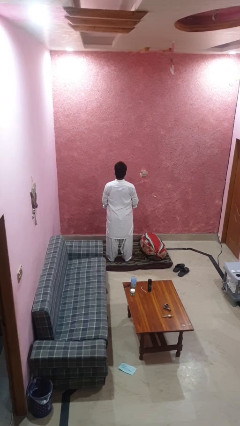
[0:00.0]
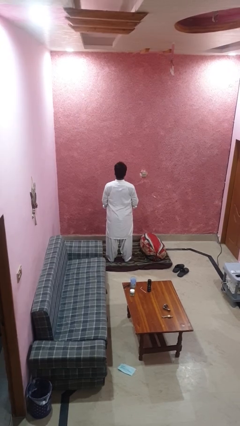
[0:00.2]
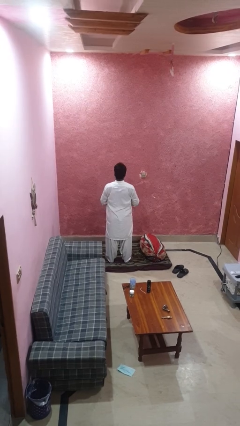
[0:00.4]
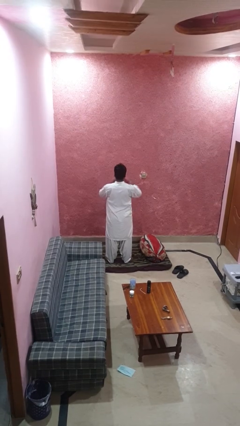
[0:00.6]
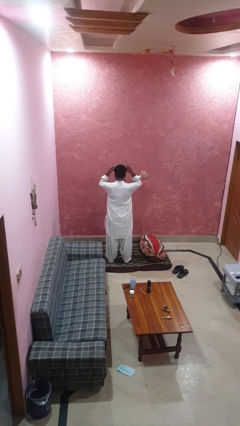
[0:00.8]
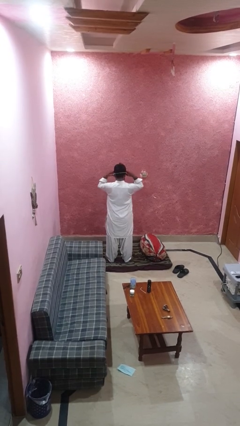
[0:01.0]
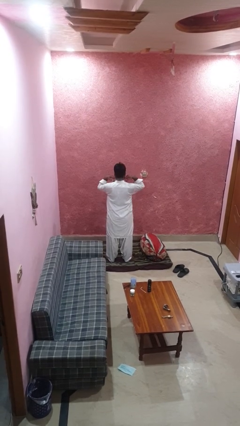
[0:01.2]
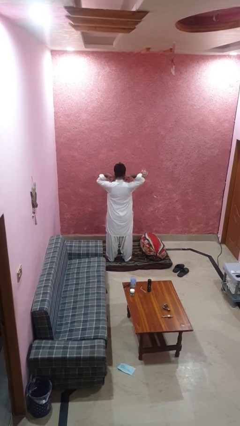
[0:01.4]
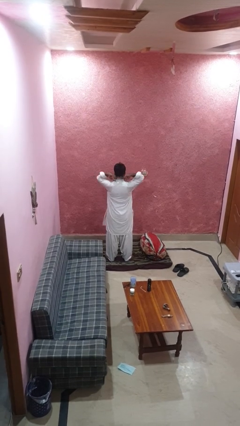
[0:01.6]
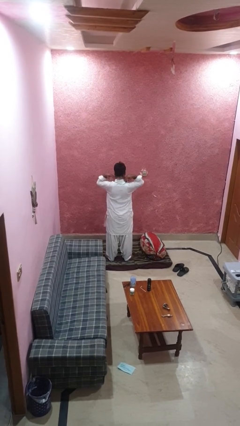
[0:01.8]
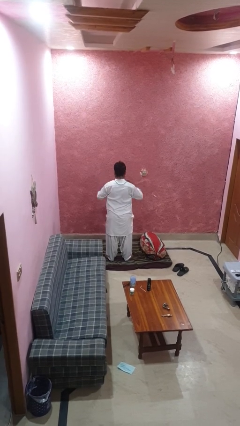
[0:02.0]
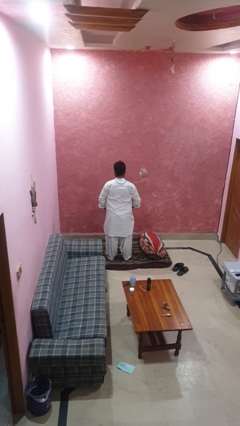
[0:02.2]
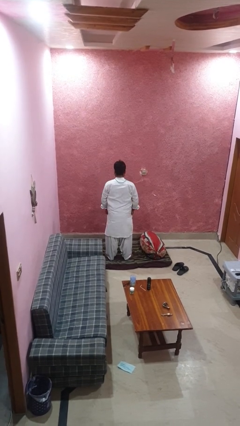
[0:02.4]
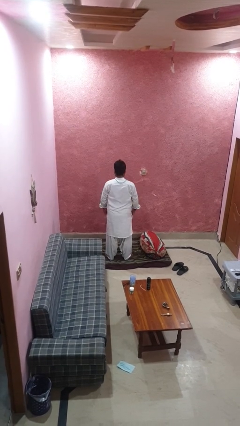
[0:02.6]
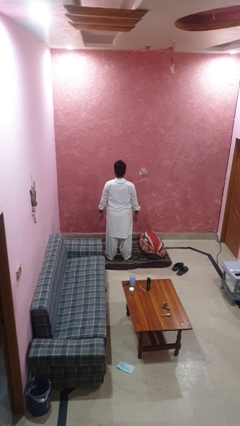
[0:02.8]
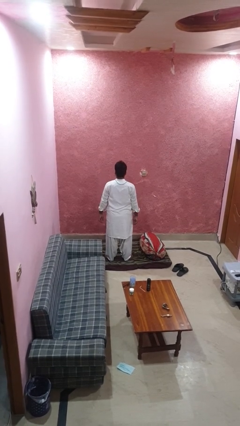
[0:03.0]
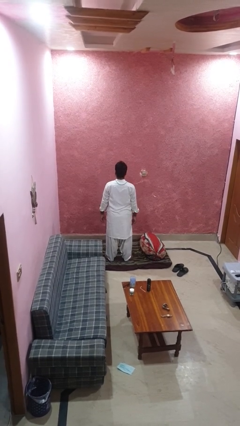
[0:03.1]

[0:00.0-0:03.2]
person puts on necklace

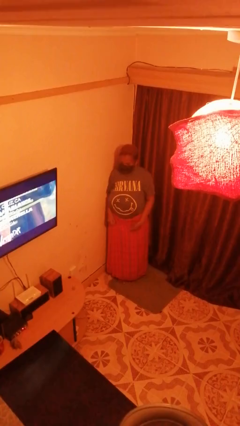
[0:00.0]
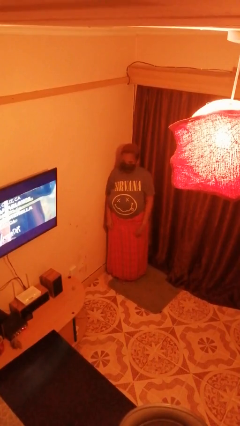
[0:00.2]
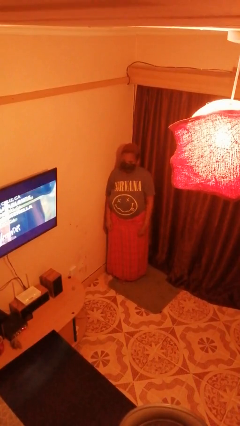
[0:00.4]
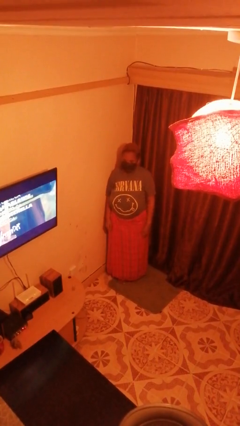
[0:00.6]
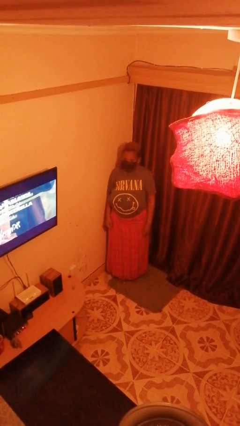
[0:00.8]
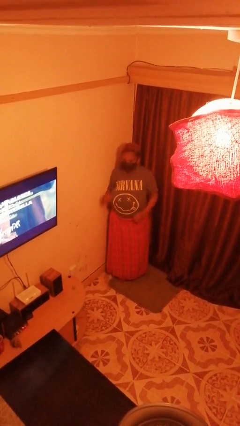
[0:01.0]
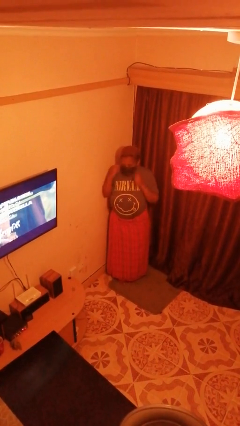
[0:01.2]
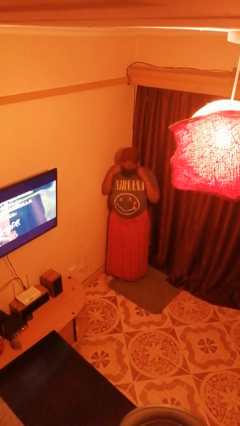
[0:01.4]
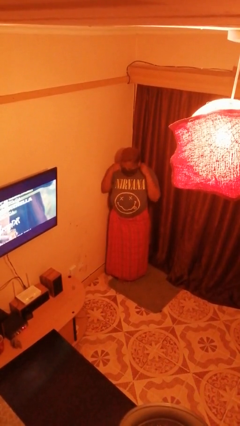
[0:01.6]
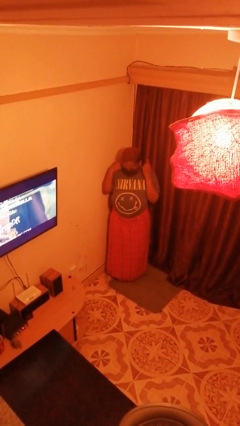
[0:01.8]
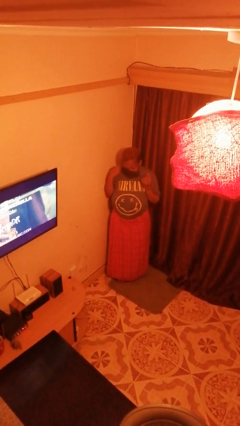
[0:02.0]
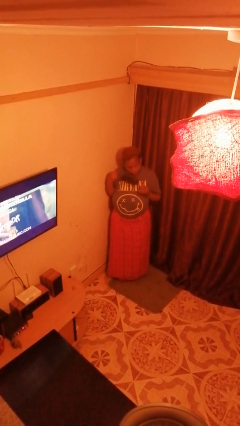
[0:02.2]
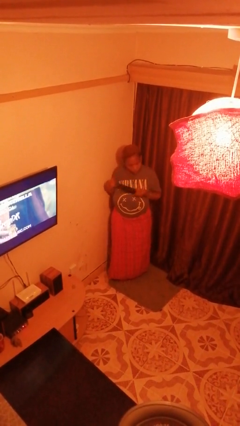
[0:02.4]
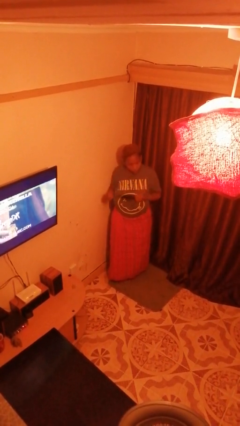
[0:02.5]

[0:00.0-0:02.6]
person takes off facemask

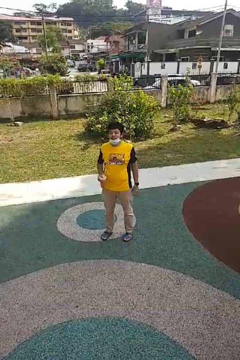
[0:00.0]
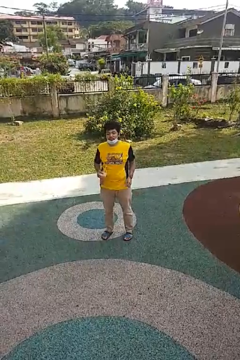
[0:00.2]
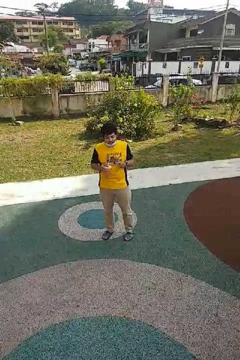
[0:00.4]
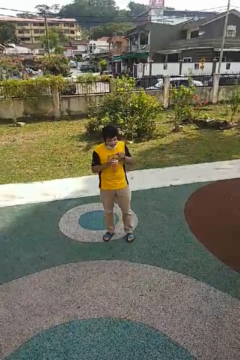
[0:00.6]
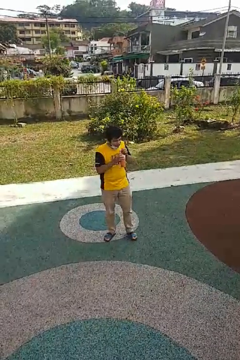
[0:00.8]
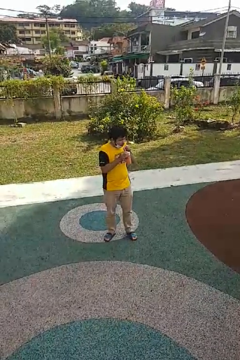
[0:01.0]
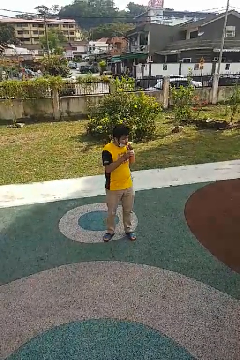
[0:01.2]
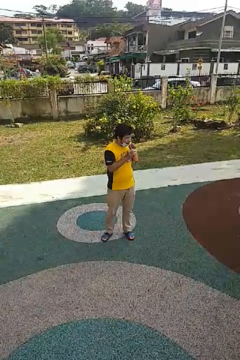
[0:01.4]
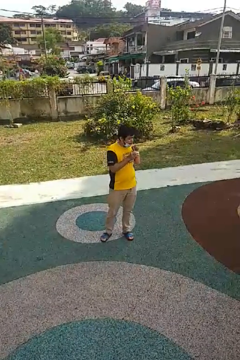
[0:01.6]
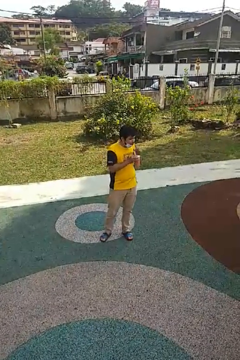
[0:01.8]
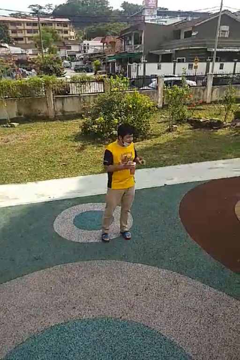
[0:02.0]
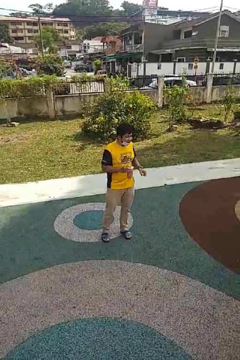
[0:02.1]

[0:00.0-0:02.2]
person drinks from straw

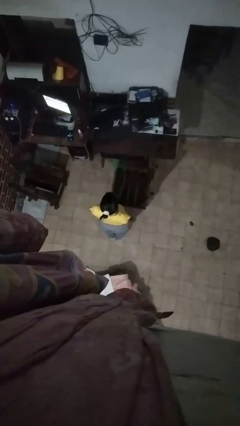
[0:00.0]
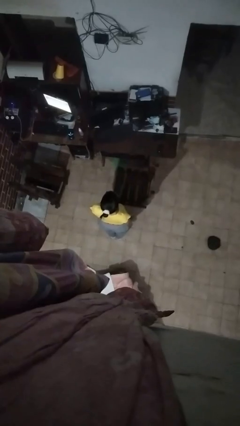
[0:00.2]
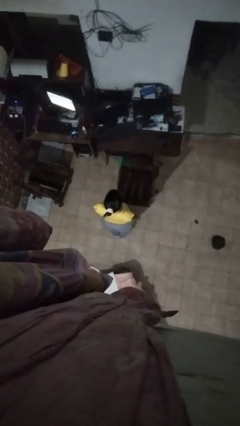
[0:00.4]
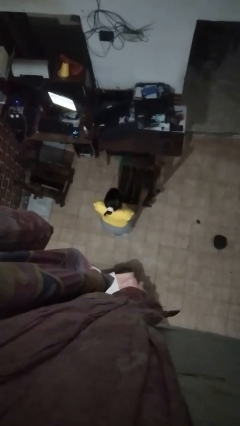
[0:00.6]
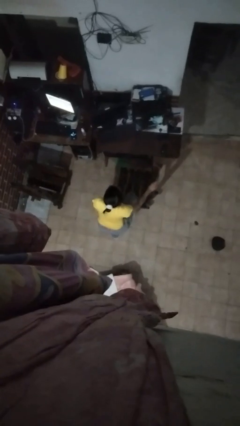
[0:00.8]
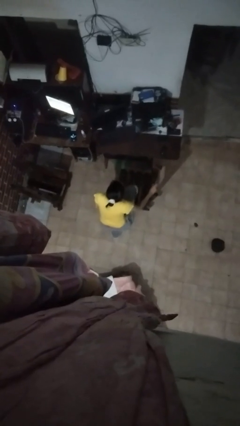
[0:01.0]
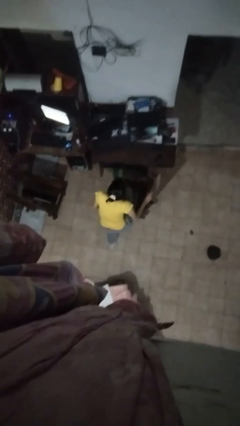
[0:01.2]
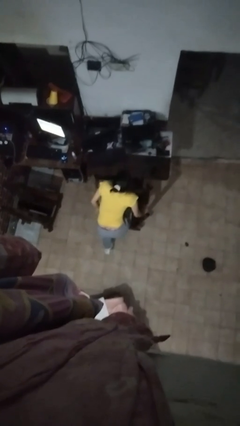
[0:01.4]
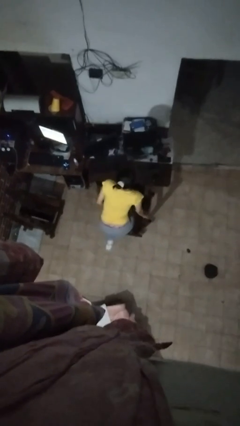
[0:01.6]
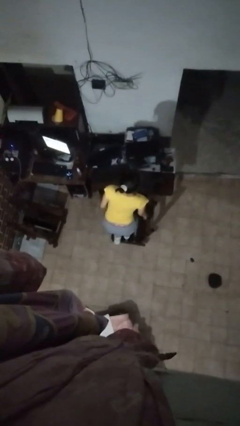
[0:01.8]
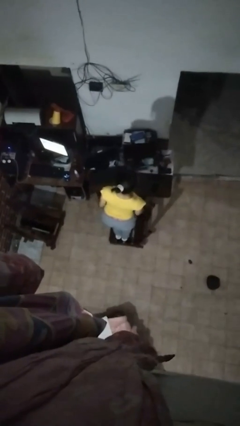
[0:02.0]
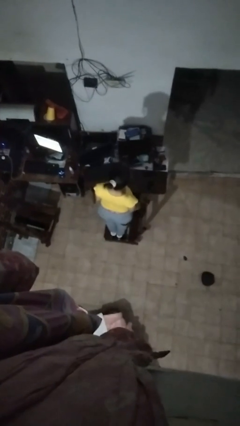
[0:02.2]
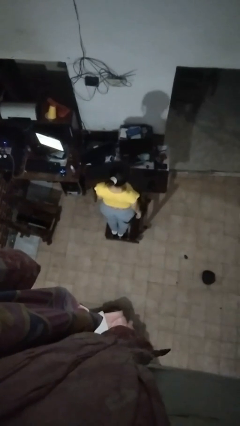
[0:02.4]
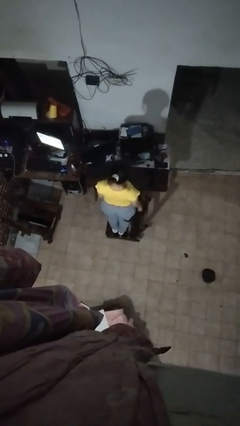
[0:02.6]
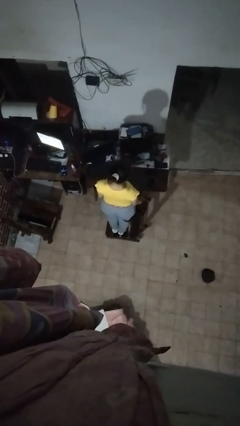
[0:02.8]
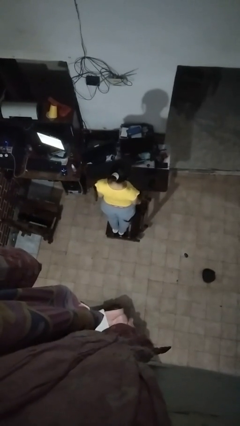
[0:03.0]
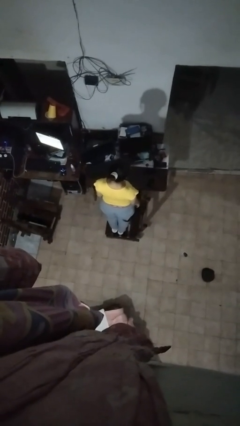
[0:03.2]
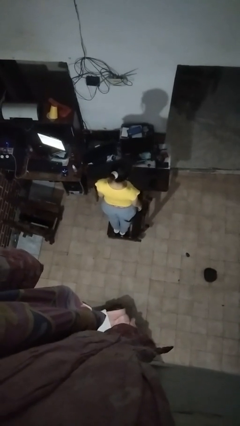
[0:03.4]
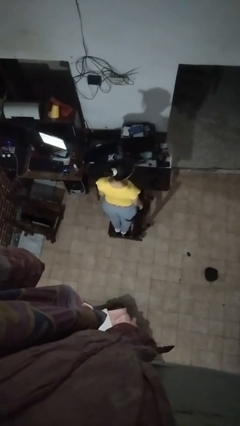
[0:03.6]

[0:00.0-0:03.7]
person climbs on chair

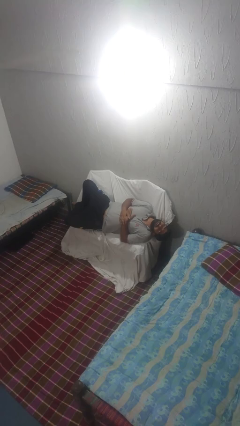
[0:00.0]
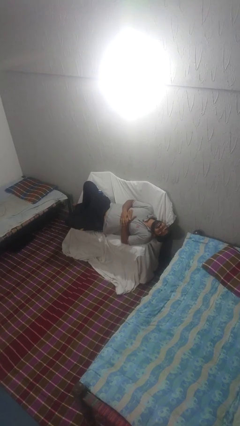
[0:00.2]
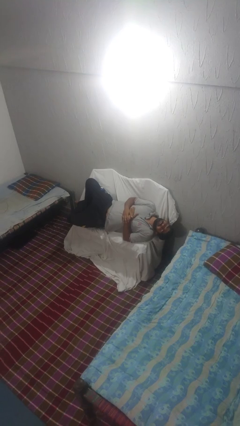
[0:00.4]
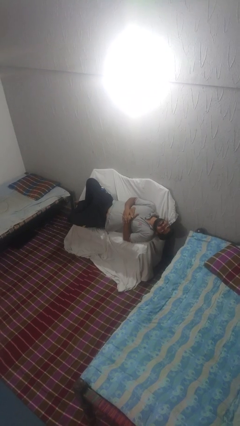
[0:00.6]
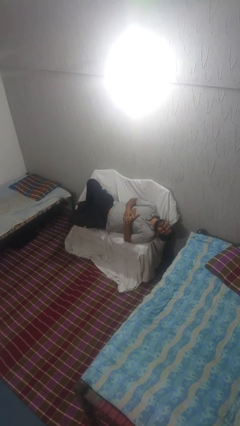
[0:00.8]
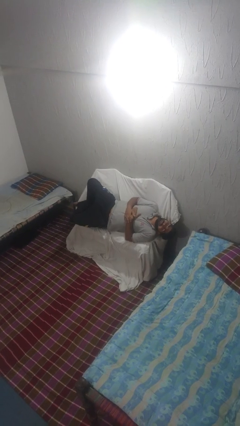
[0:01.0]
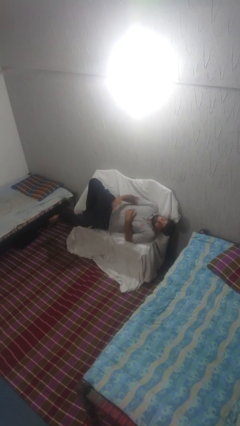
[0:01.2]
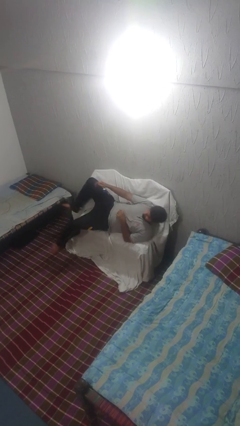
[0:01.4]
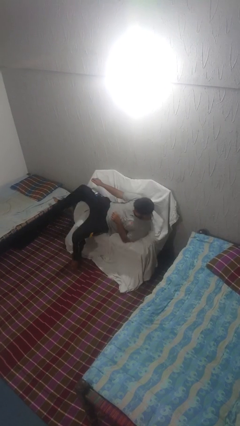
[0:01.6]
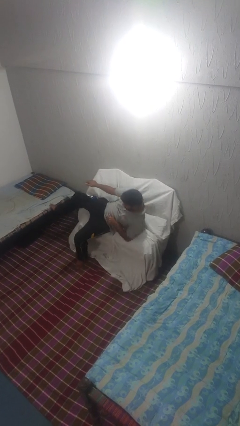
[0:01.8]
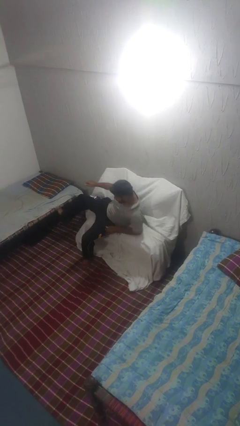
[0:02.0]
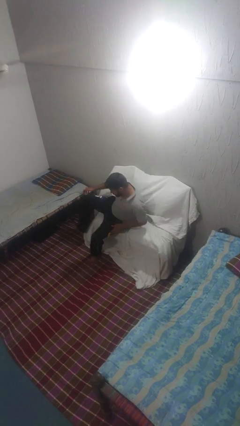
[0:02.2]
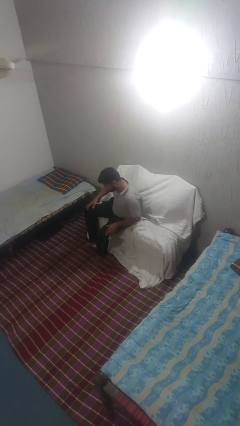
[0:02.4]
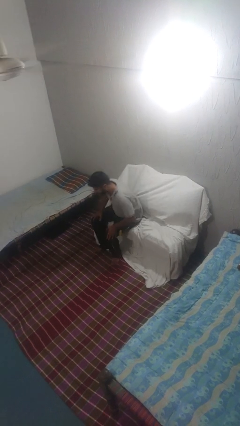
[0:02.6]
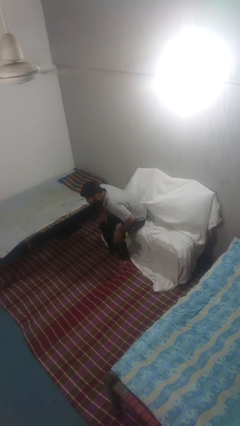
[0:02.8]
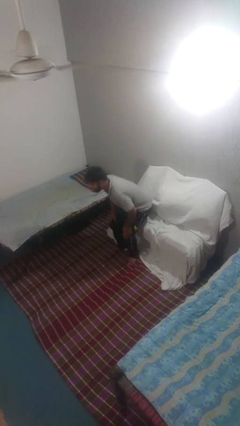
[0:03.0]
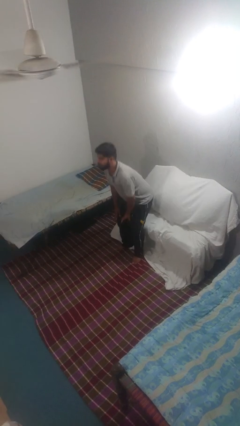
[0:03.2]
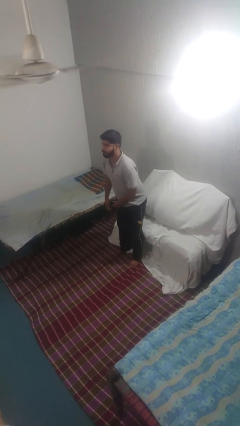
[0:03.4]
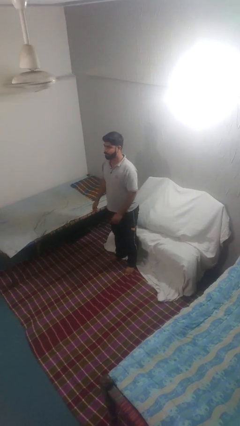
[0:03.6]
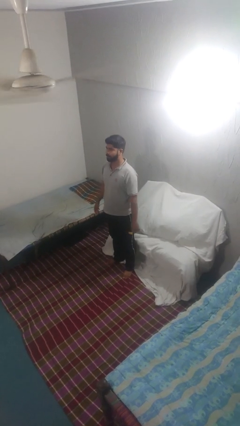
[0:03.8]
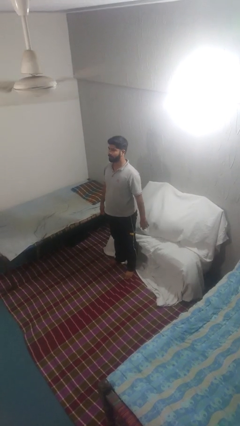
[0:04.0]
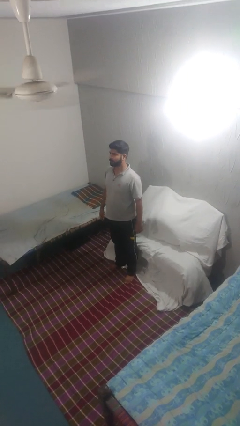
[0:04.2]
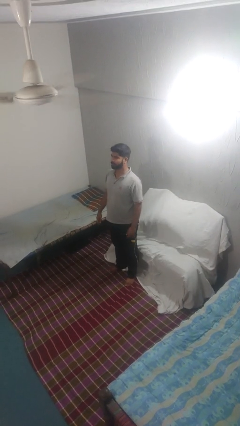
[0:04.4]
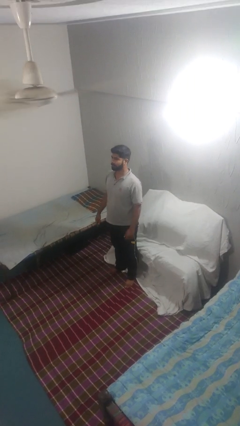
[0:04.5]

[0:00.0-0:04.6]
person stands up

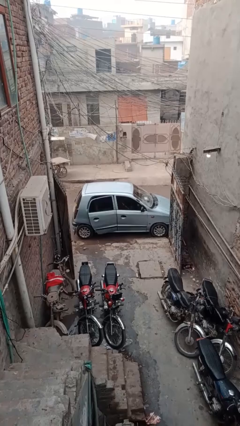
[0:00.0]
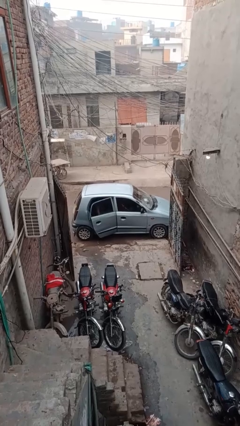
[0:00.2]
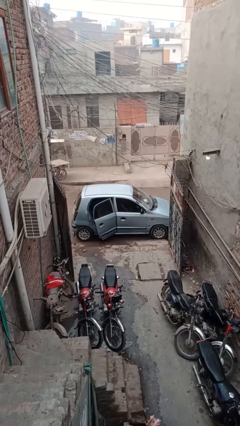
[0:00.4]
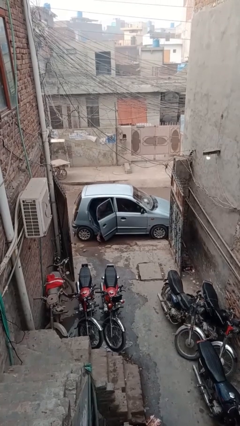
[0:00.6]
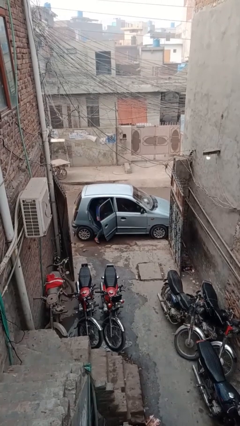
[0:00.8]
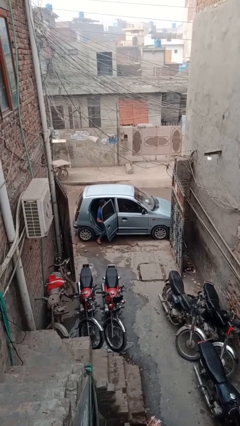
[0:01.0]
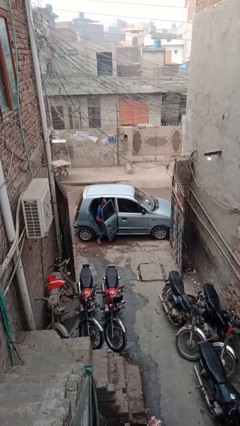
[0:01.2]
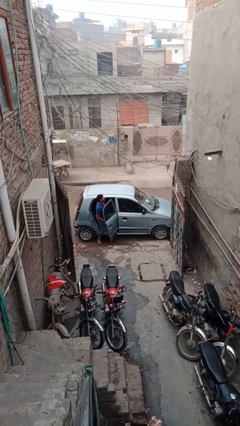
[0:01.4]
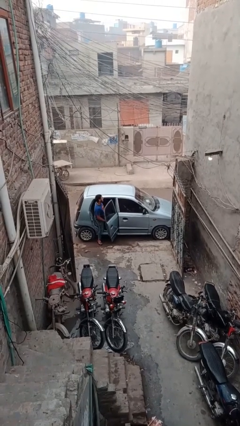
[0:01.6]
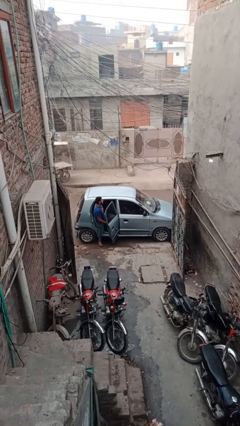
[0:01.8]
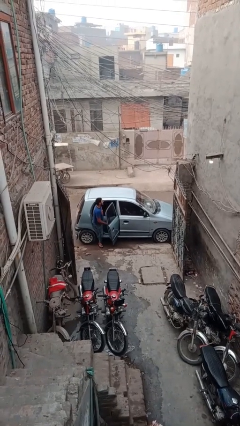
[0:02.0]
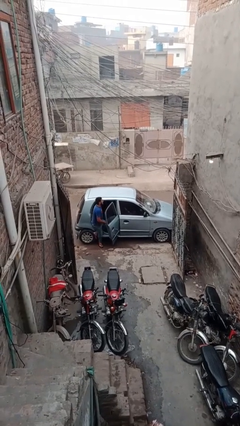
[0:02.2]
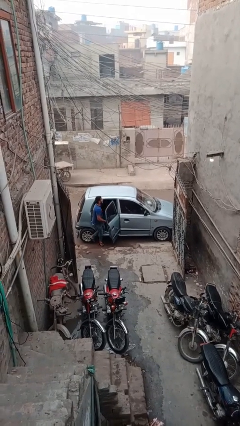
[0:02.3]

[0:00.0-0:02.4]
car drops off person
